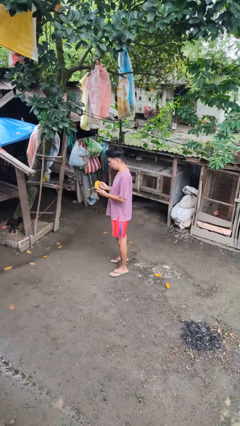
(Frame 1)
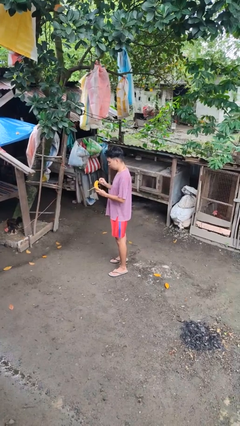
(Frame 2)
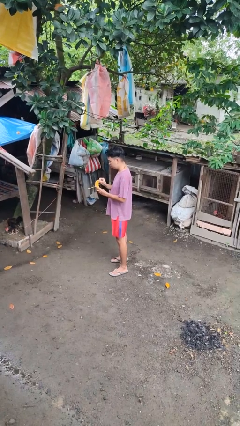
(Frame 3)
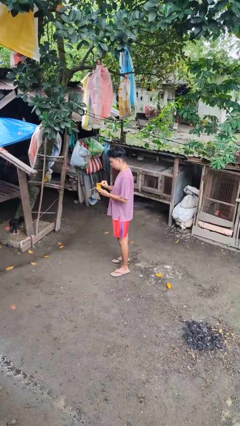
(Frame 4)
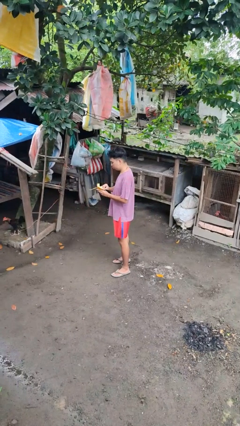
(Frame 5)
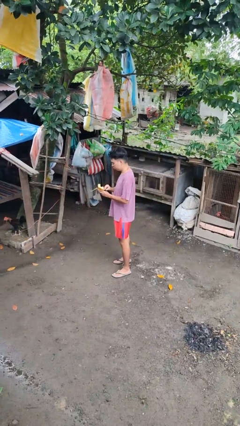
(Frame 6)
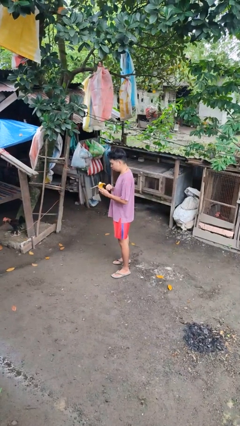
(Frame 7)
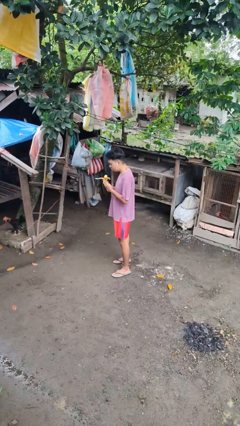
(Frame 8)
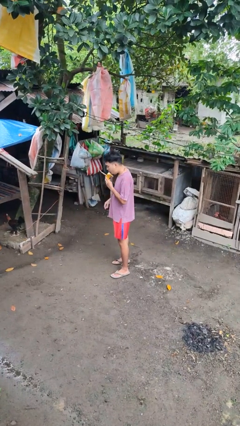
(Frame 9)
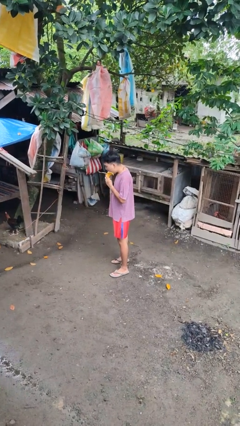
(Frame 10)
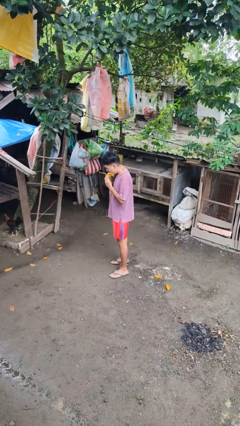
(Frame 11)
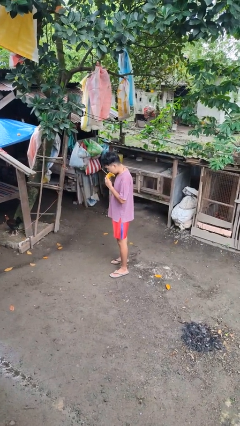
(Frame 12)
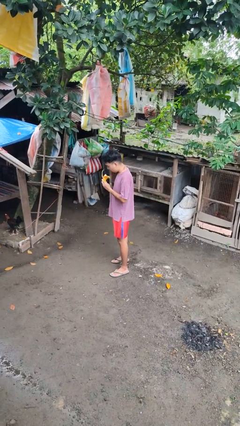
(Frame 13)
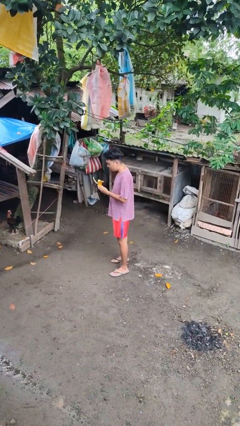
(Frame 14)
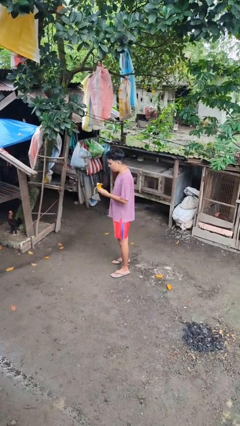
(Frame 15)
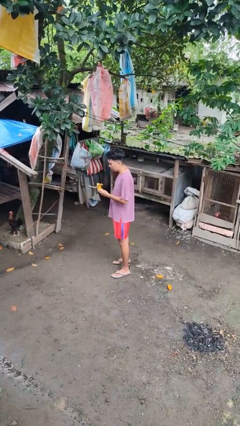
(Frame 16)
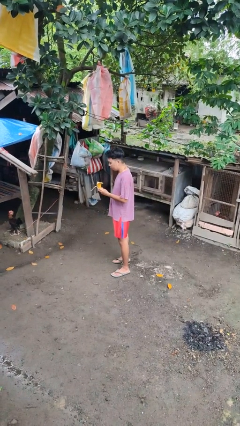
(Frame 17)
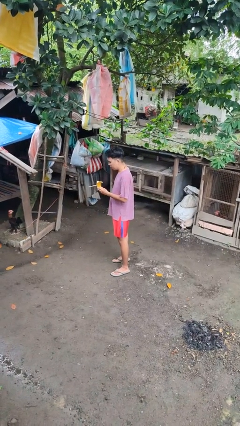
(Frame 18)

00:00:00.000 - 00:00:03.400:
person eats banana

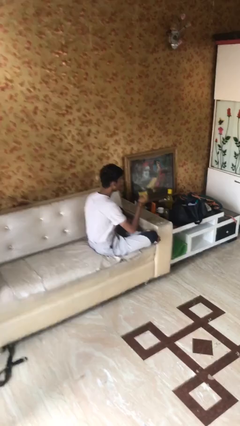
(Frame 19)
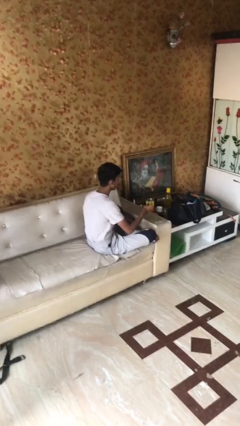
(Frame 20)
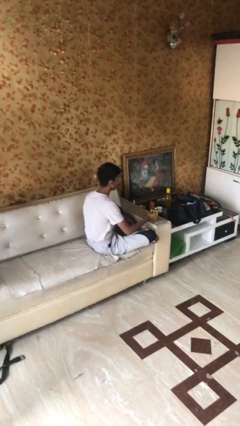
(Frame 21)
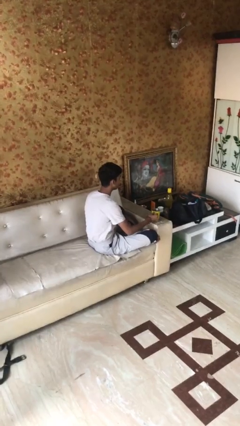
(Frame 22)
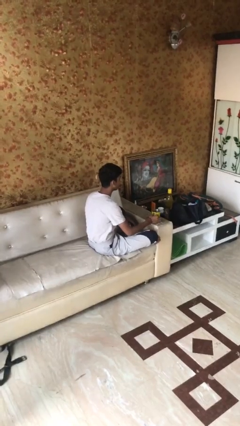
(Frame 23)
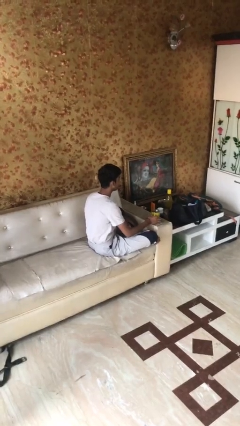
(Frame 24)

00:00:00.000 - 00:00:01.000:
person puts down object on table

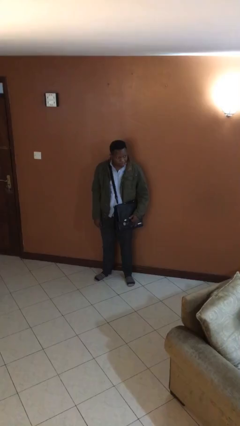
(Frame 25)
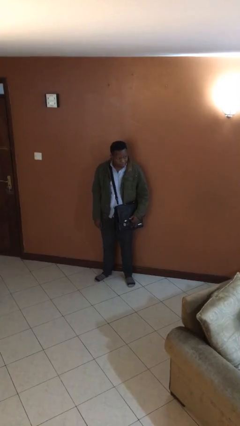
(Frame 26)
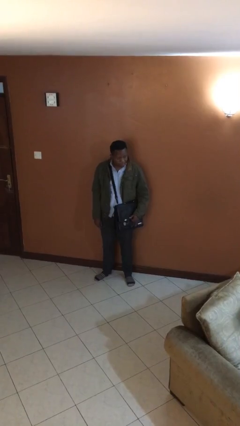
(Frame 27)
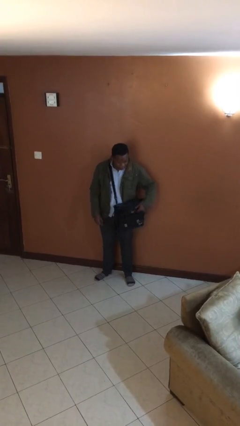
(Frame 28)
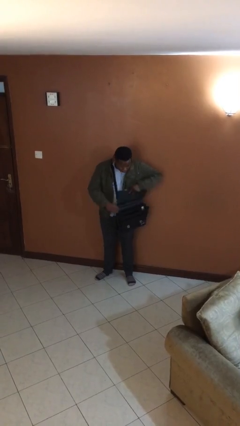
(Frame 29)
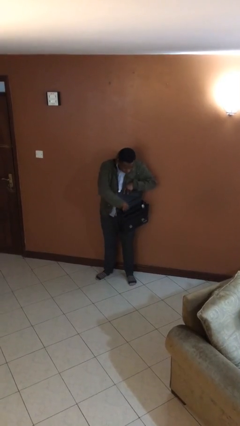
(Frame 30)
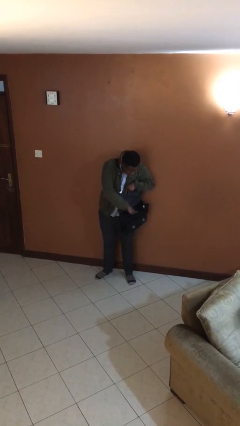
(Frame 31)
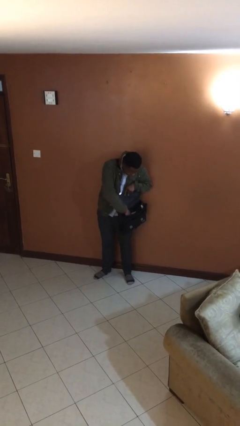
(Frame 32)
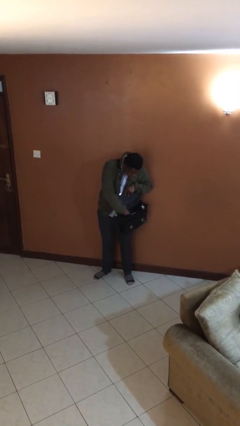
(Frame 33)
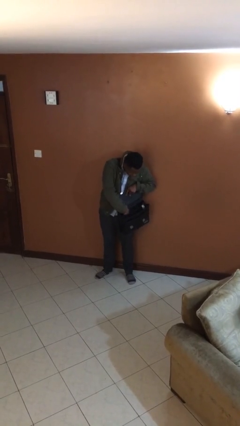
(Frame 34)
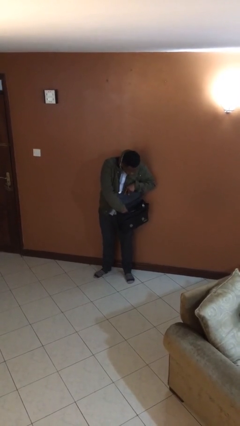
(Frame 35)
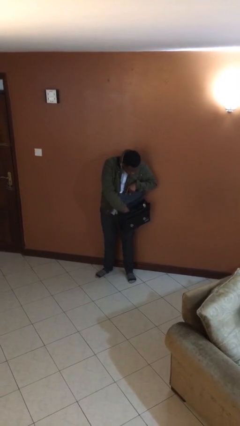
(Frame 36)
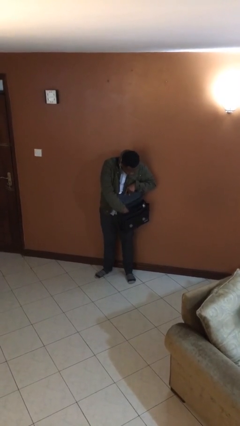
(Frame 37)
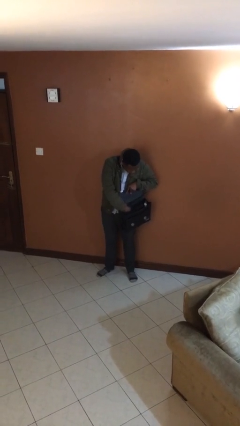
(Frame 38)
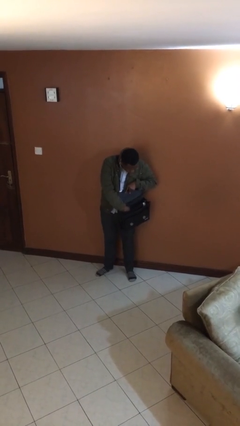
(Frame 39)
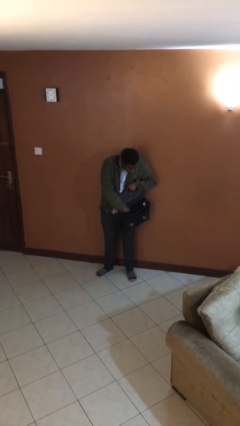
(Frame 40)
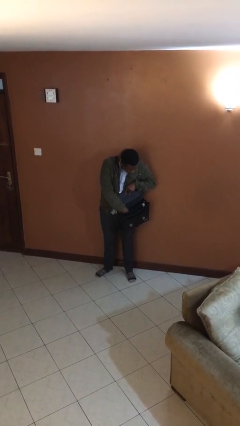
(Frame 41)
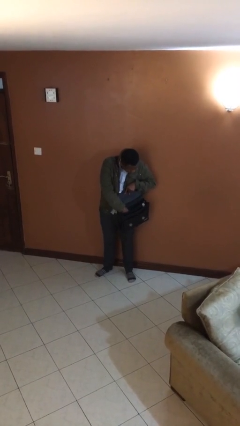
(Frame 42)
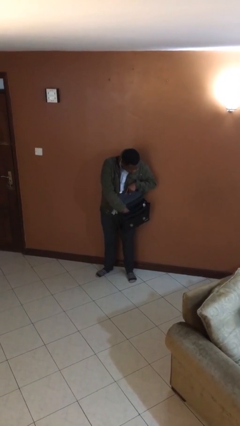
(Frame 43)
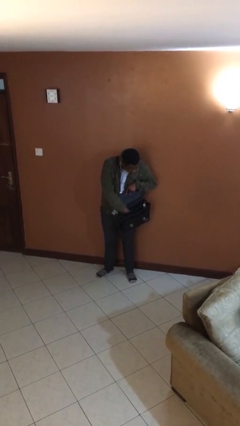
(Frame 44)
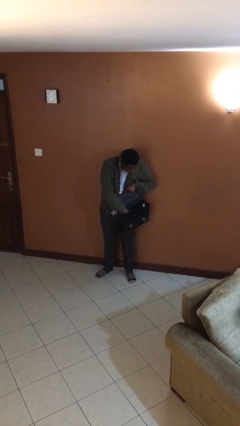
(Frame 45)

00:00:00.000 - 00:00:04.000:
person searches in purse

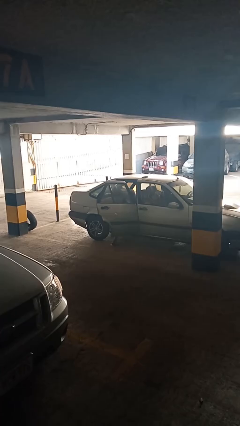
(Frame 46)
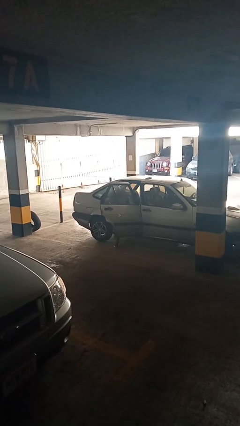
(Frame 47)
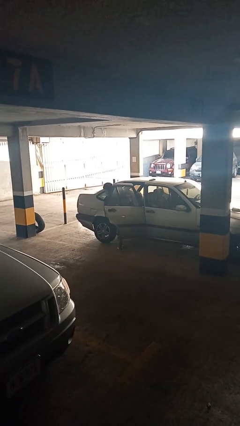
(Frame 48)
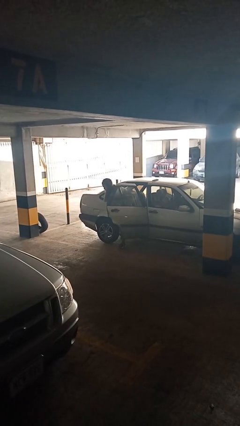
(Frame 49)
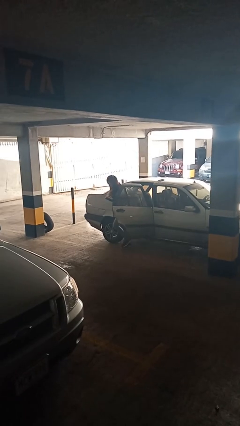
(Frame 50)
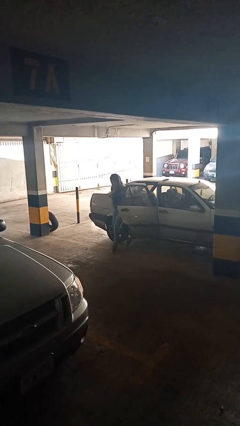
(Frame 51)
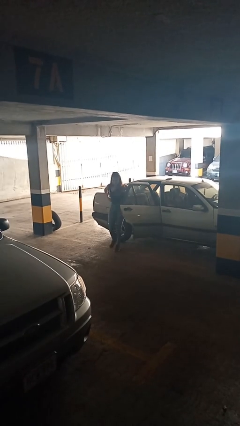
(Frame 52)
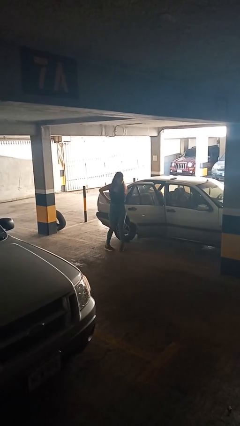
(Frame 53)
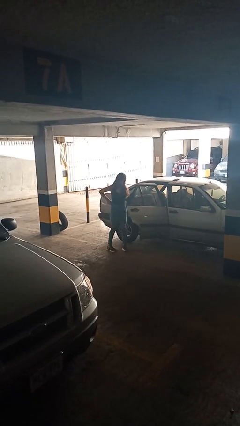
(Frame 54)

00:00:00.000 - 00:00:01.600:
person exits car

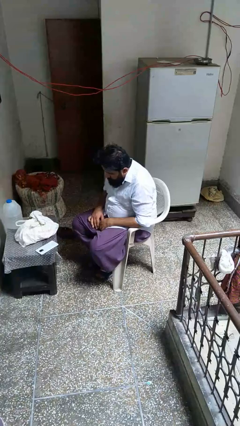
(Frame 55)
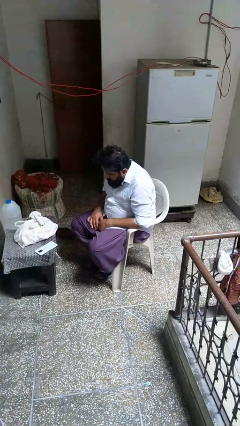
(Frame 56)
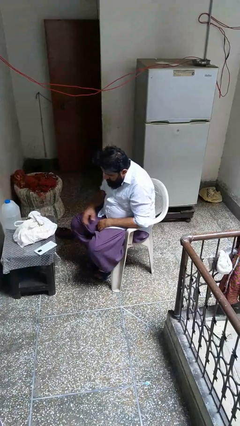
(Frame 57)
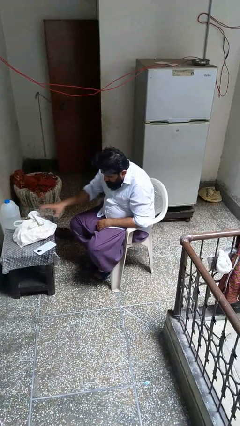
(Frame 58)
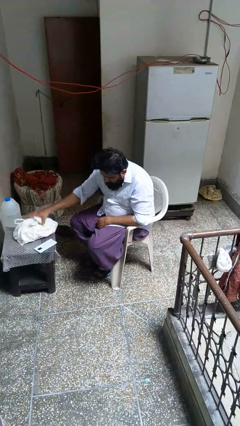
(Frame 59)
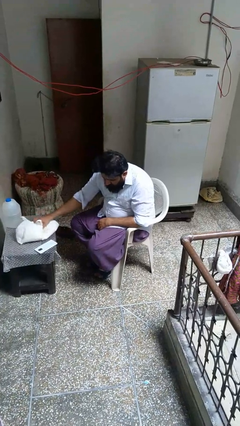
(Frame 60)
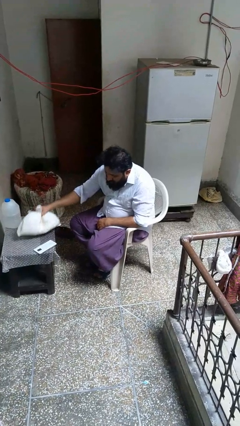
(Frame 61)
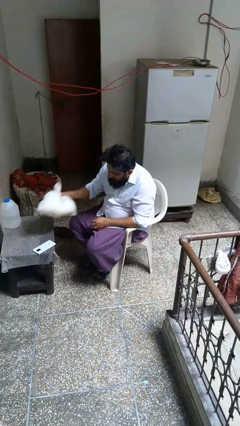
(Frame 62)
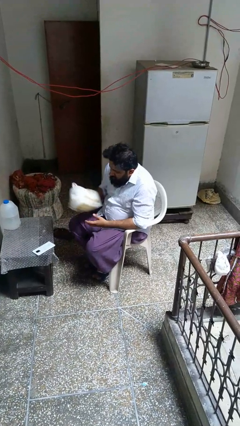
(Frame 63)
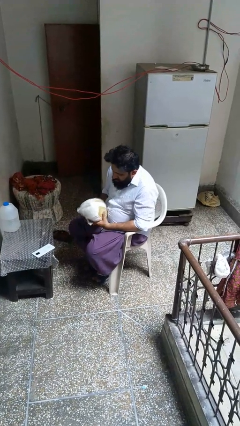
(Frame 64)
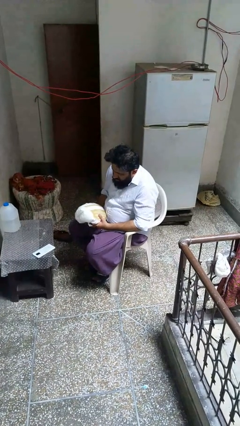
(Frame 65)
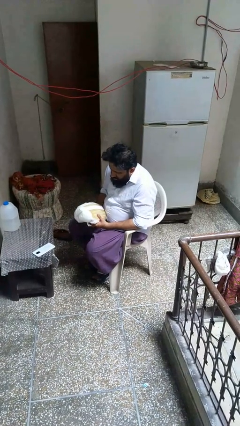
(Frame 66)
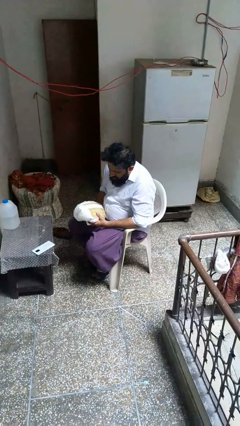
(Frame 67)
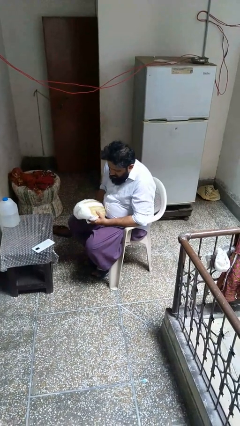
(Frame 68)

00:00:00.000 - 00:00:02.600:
person picks up object from table

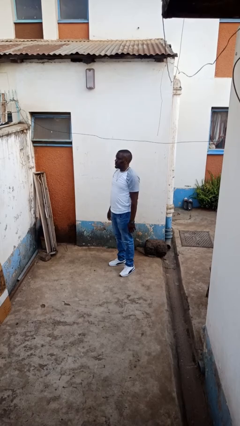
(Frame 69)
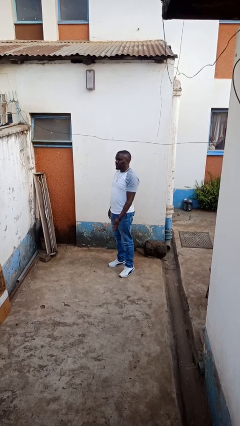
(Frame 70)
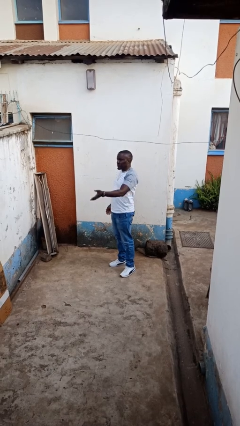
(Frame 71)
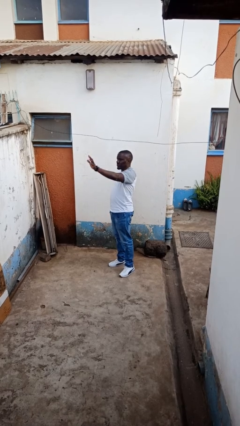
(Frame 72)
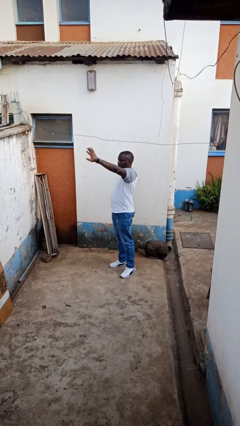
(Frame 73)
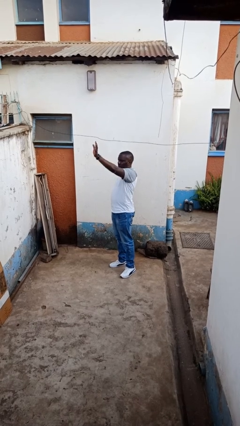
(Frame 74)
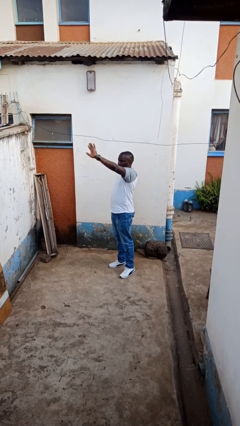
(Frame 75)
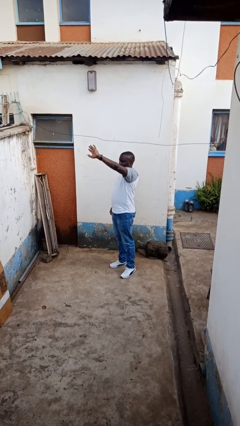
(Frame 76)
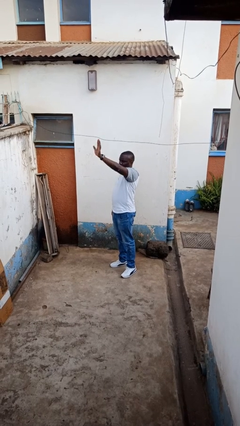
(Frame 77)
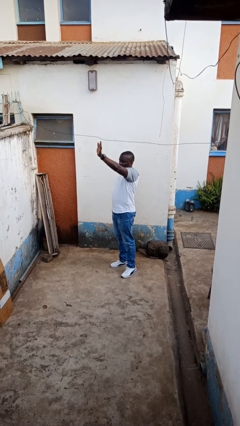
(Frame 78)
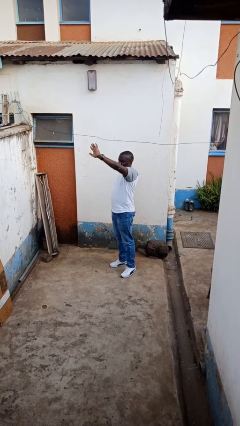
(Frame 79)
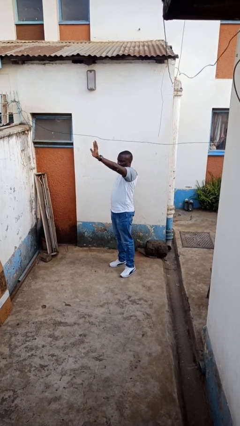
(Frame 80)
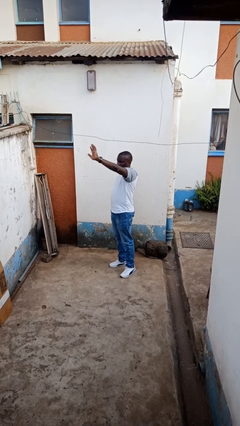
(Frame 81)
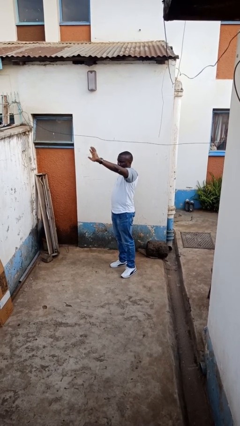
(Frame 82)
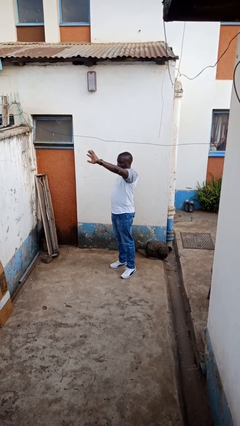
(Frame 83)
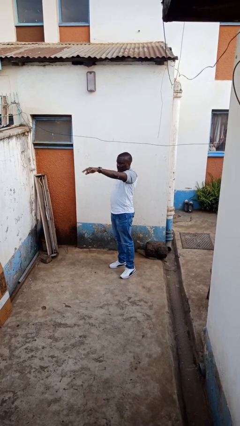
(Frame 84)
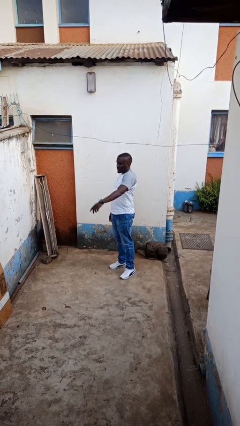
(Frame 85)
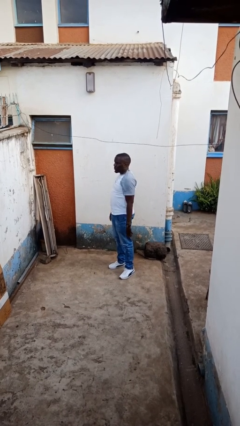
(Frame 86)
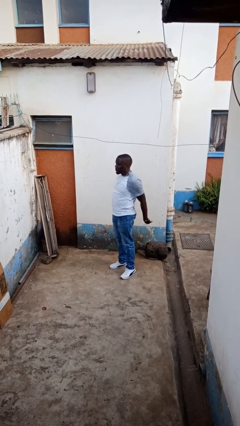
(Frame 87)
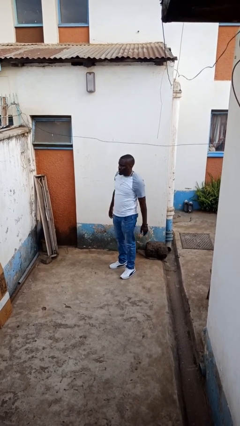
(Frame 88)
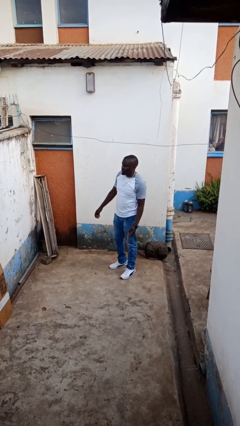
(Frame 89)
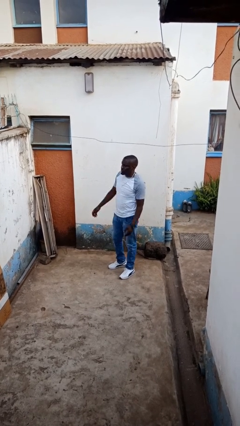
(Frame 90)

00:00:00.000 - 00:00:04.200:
person waves at person

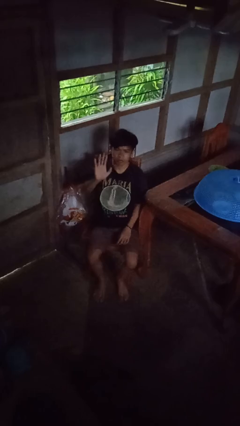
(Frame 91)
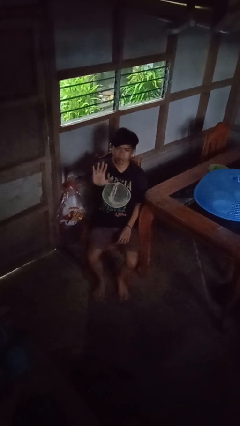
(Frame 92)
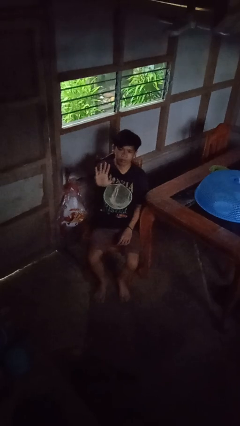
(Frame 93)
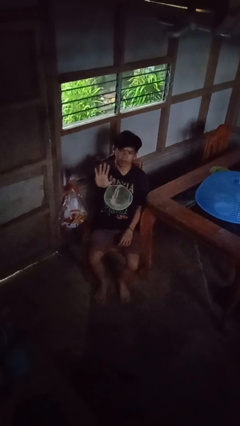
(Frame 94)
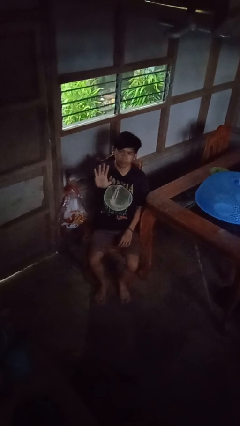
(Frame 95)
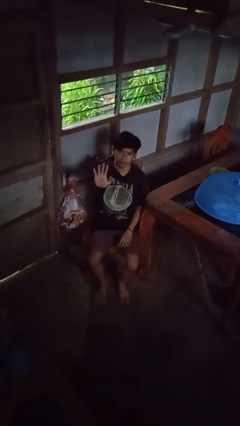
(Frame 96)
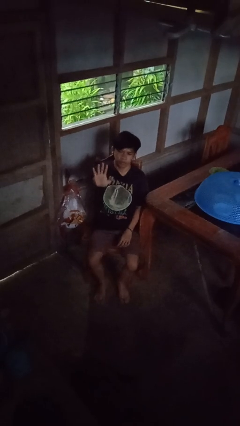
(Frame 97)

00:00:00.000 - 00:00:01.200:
person gestures number five
